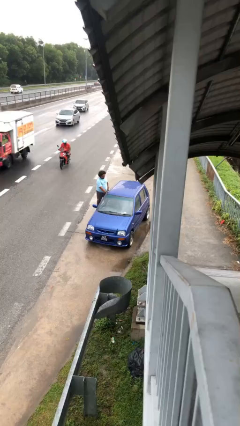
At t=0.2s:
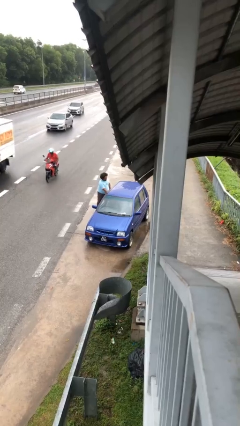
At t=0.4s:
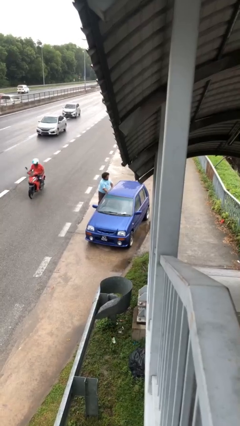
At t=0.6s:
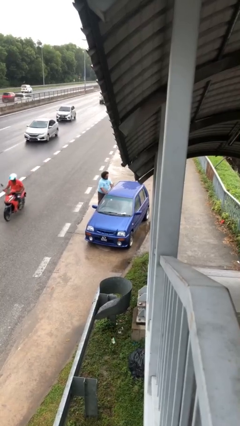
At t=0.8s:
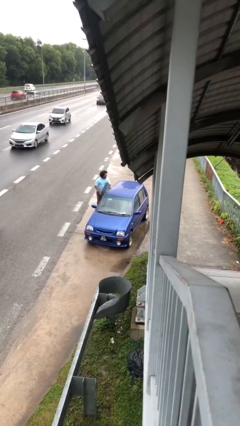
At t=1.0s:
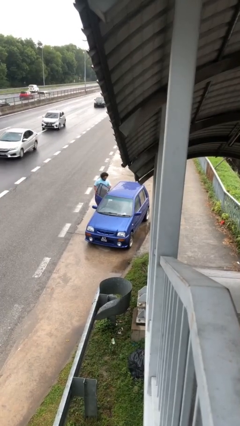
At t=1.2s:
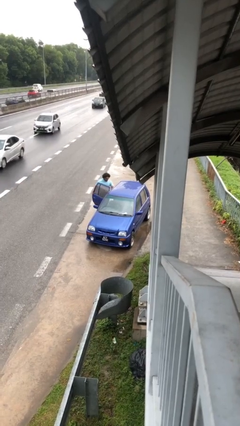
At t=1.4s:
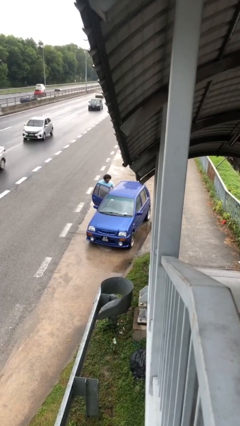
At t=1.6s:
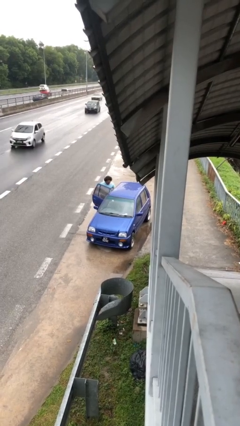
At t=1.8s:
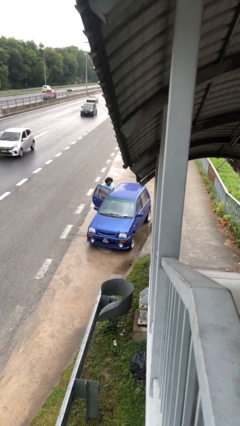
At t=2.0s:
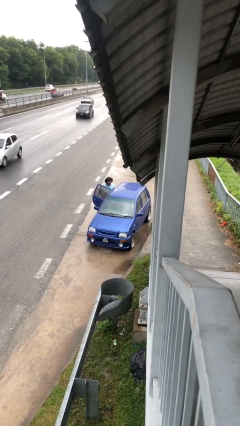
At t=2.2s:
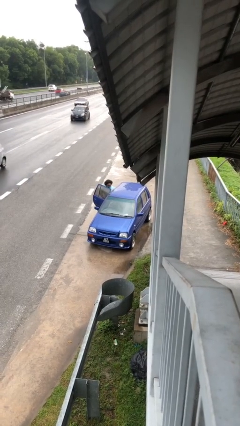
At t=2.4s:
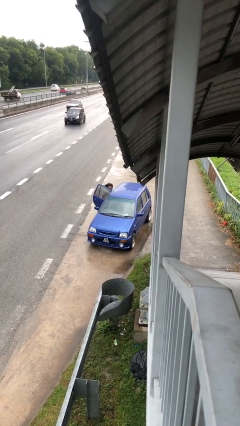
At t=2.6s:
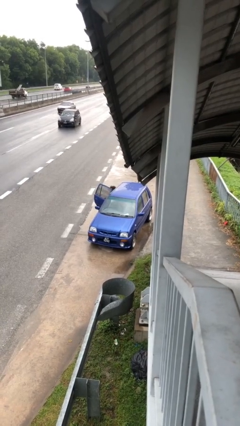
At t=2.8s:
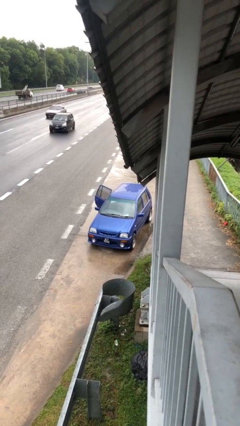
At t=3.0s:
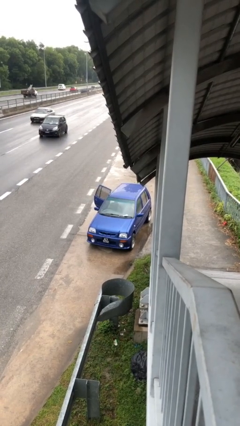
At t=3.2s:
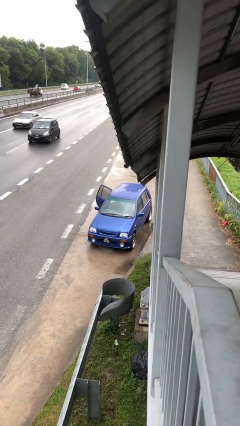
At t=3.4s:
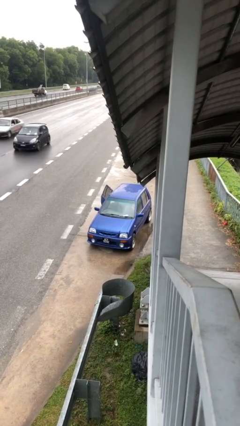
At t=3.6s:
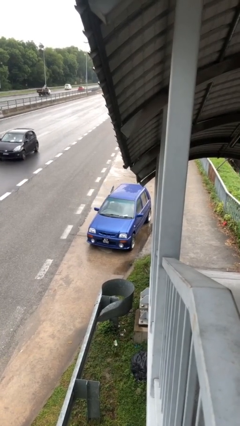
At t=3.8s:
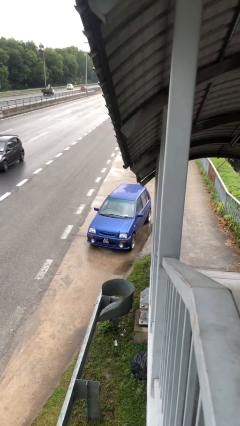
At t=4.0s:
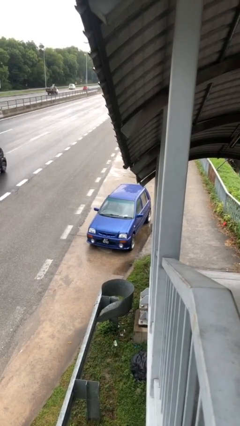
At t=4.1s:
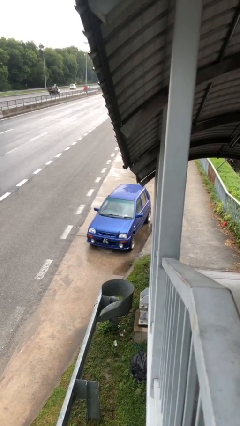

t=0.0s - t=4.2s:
car picks up person

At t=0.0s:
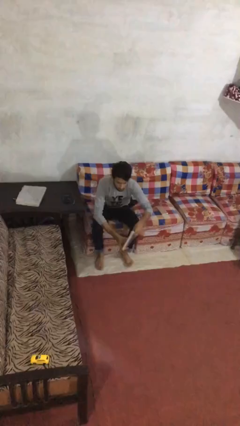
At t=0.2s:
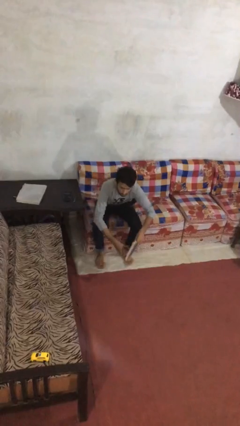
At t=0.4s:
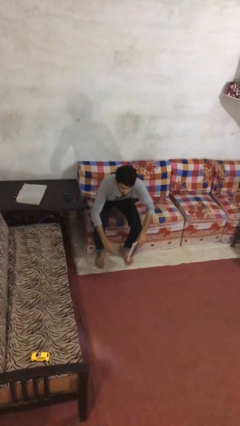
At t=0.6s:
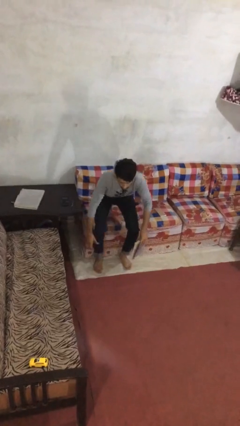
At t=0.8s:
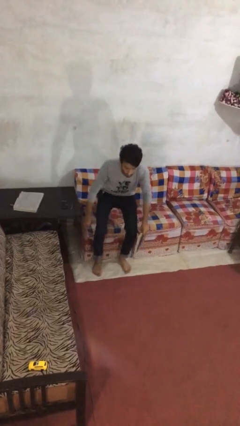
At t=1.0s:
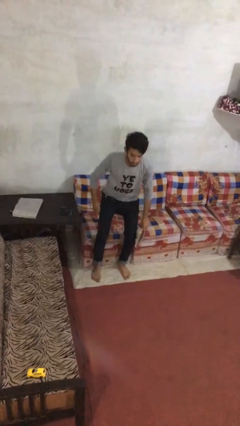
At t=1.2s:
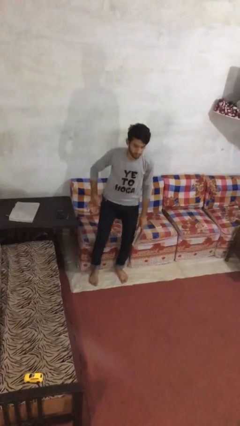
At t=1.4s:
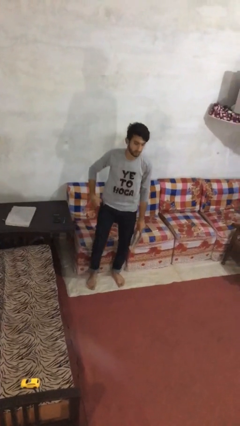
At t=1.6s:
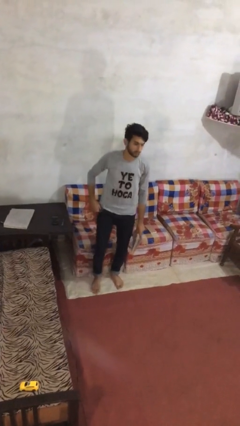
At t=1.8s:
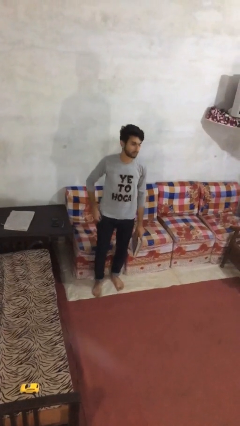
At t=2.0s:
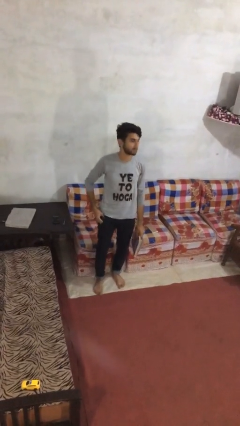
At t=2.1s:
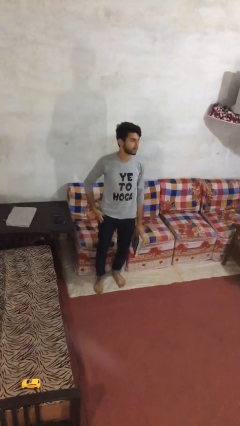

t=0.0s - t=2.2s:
person stands up

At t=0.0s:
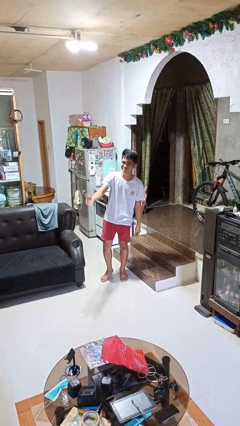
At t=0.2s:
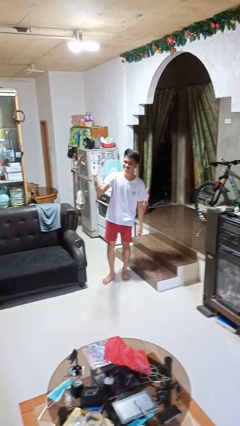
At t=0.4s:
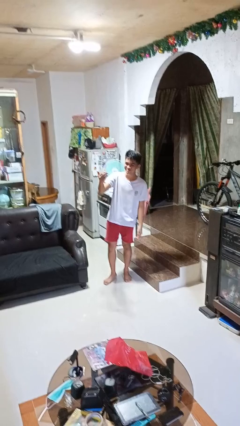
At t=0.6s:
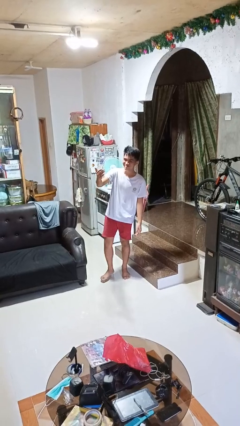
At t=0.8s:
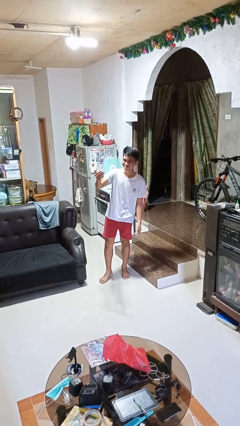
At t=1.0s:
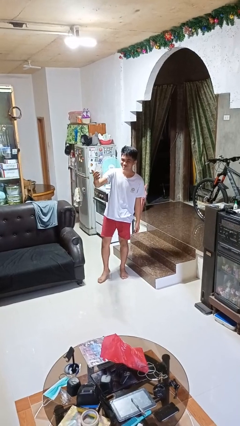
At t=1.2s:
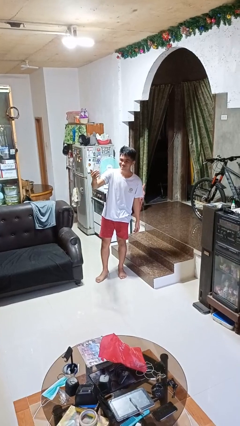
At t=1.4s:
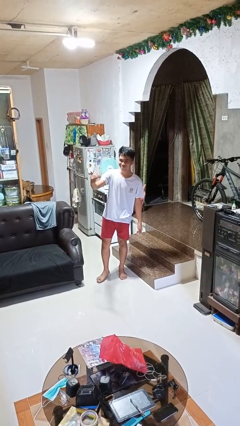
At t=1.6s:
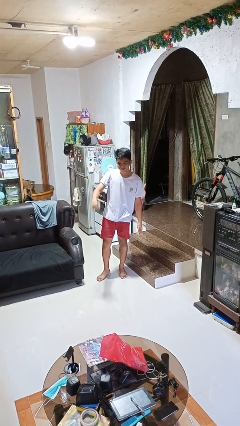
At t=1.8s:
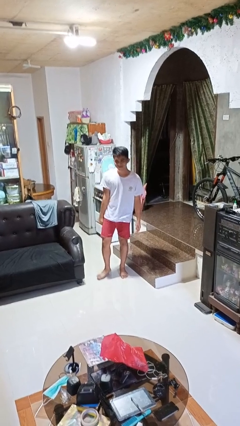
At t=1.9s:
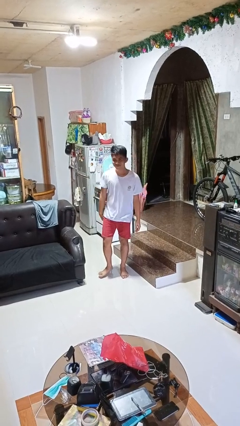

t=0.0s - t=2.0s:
person gestures come here

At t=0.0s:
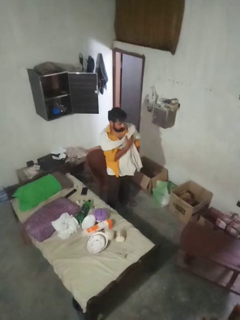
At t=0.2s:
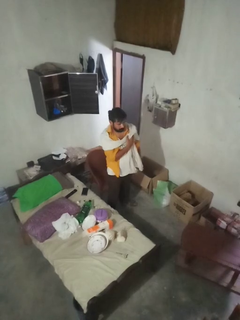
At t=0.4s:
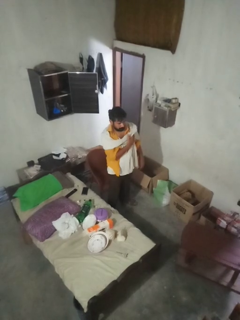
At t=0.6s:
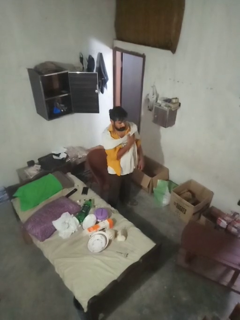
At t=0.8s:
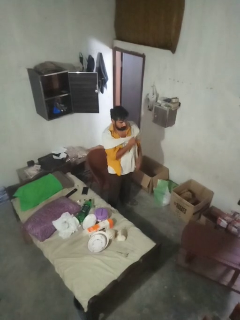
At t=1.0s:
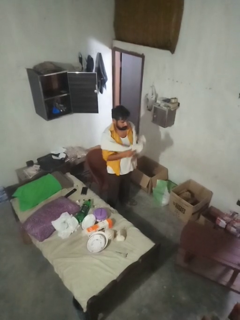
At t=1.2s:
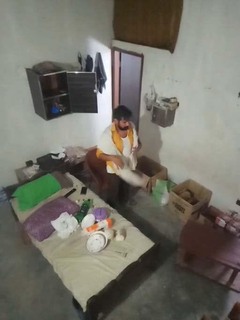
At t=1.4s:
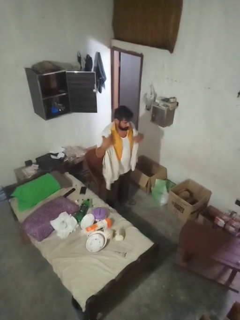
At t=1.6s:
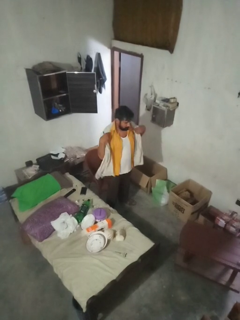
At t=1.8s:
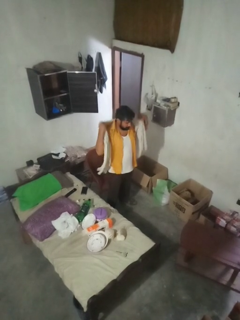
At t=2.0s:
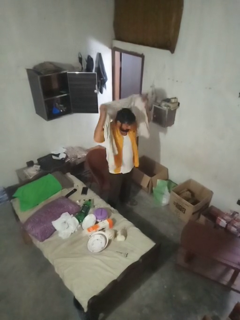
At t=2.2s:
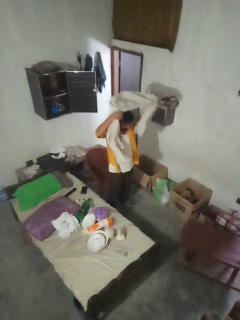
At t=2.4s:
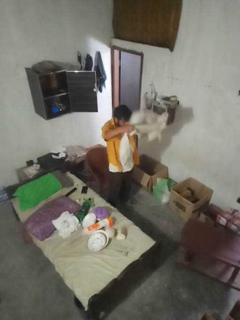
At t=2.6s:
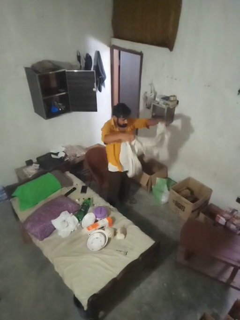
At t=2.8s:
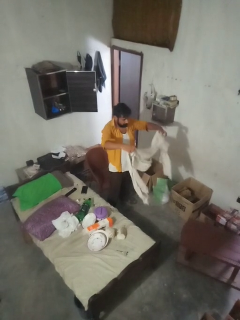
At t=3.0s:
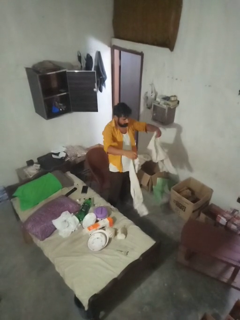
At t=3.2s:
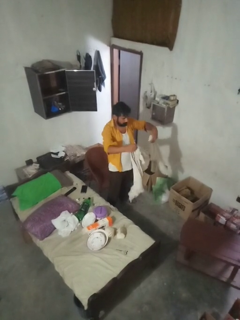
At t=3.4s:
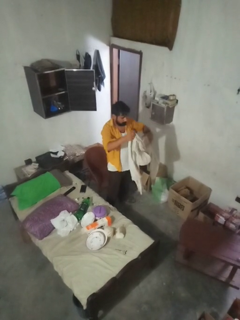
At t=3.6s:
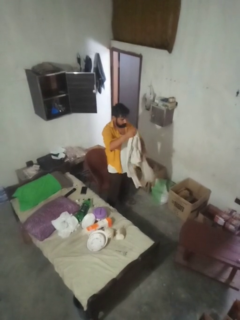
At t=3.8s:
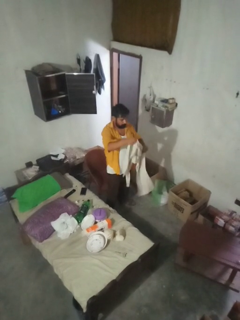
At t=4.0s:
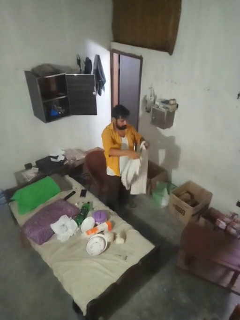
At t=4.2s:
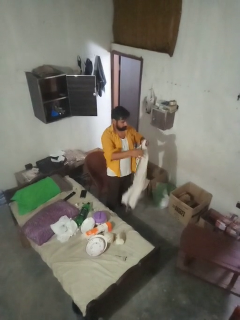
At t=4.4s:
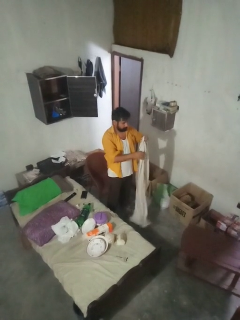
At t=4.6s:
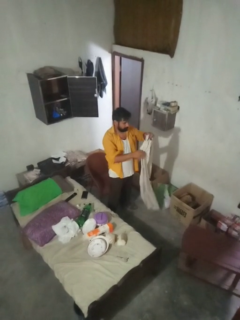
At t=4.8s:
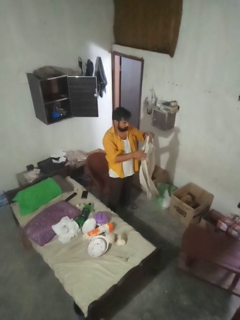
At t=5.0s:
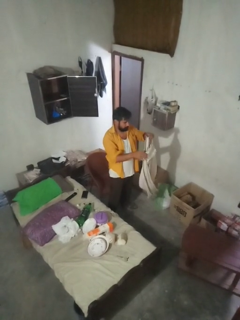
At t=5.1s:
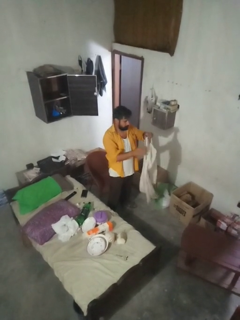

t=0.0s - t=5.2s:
person uncovers with blanket

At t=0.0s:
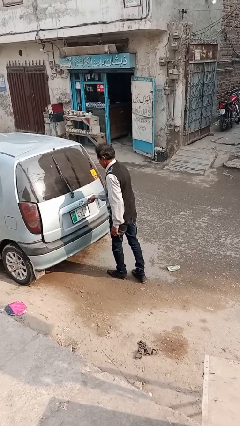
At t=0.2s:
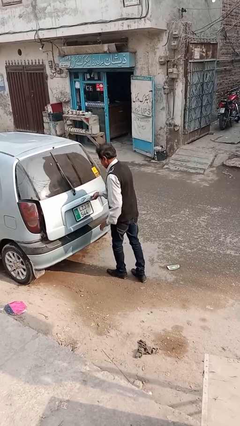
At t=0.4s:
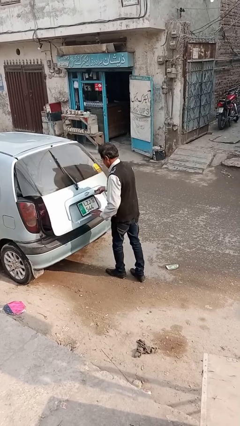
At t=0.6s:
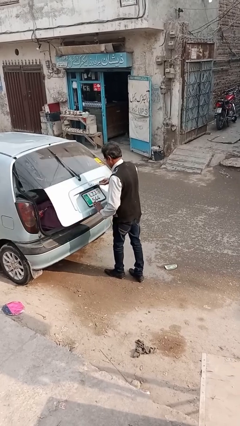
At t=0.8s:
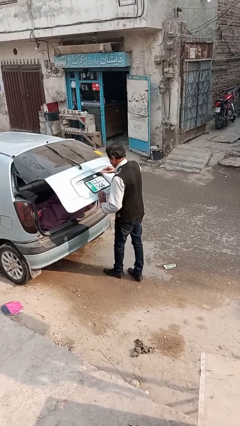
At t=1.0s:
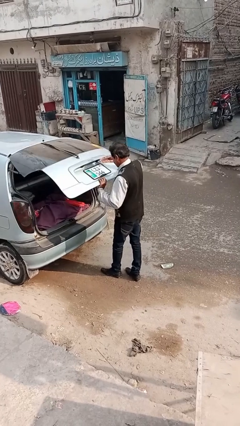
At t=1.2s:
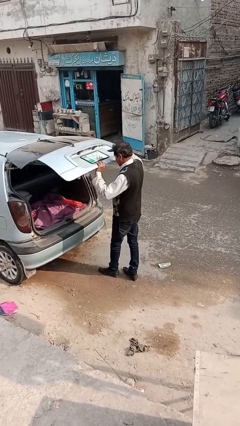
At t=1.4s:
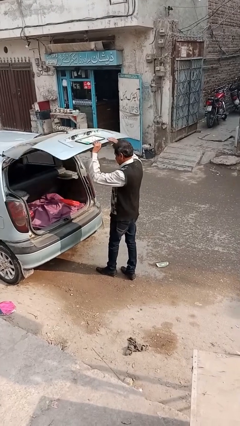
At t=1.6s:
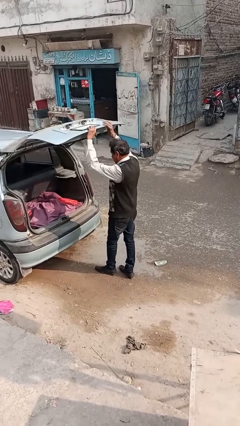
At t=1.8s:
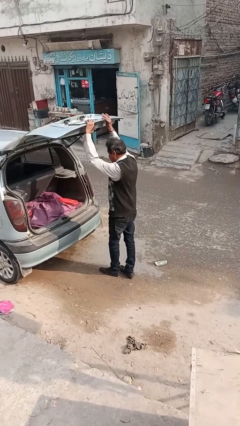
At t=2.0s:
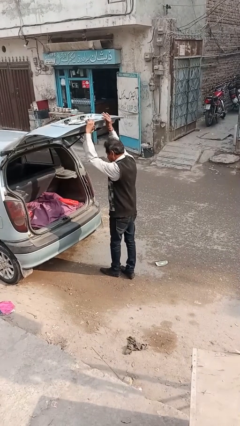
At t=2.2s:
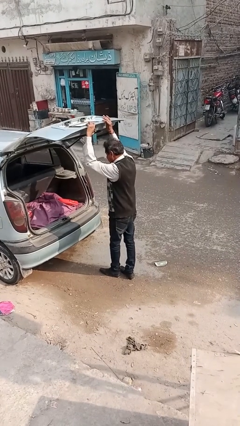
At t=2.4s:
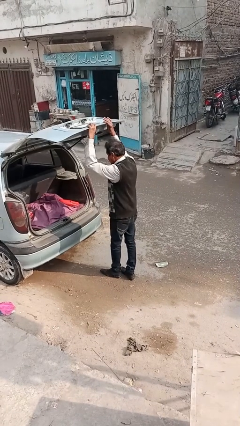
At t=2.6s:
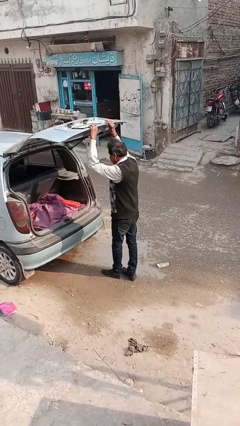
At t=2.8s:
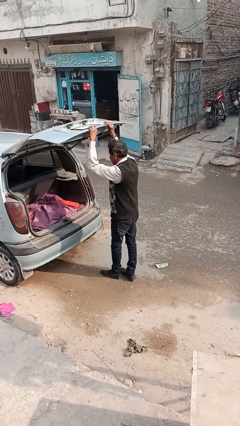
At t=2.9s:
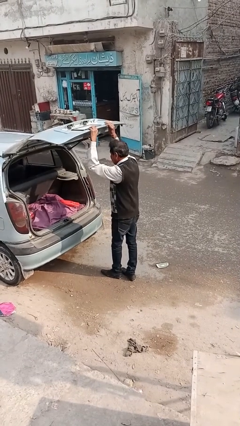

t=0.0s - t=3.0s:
person opens car trunk

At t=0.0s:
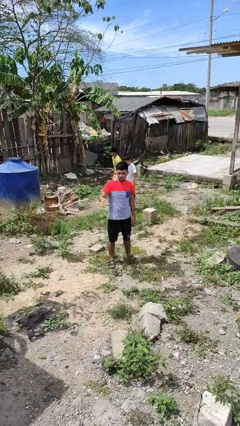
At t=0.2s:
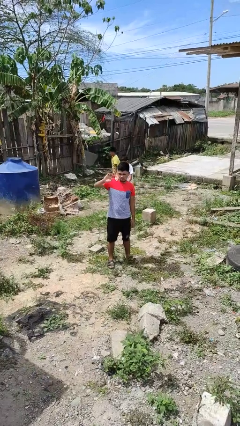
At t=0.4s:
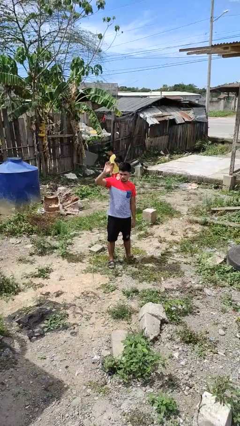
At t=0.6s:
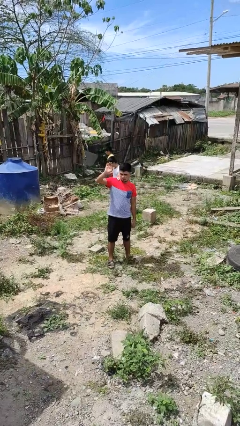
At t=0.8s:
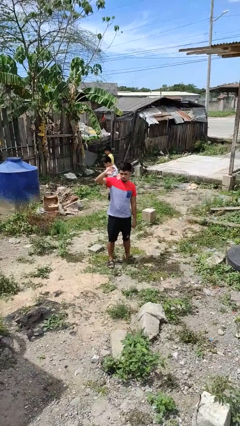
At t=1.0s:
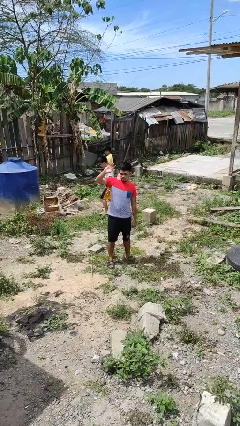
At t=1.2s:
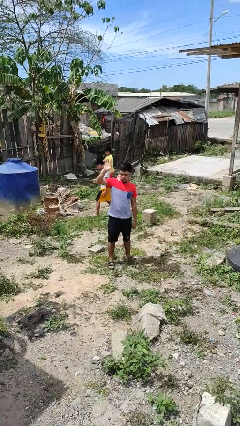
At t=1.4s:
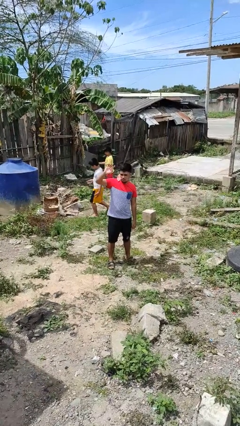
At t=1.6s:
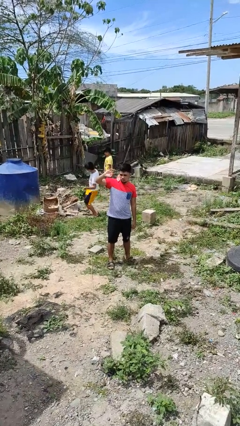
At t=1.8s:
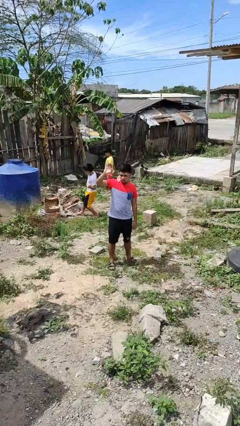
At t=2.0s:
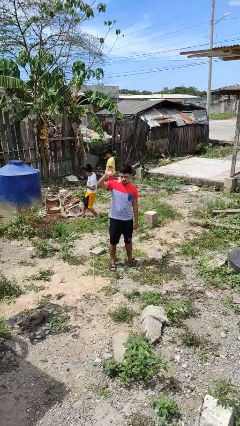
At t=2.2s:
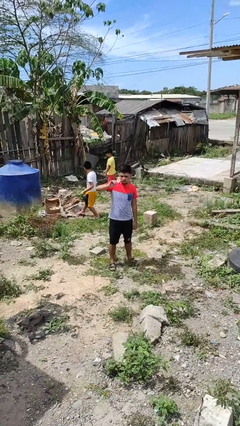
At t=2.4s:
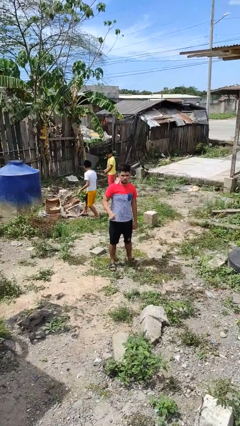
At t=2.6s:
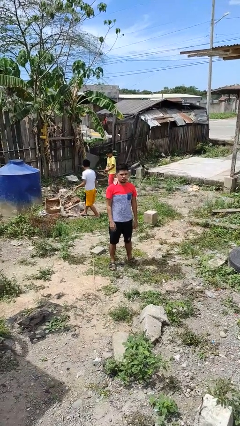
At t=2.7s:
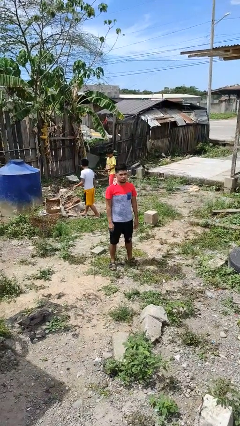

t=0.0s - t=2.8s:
person waves at person
